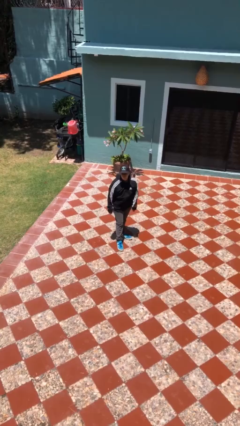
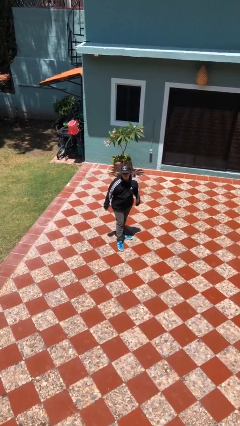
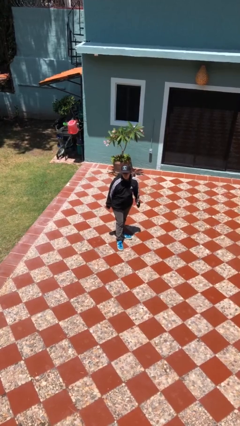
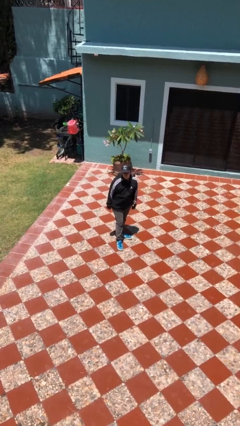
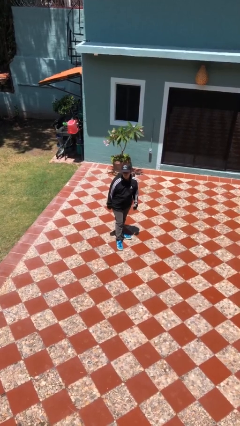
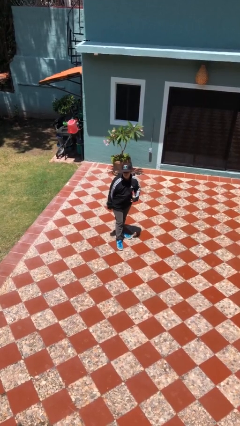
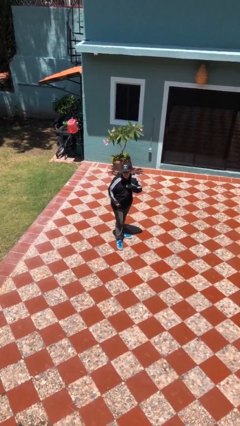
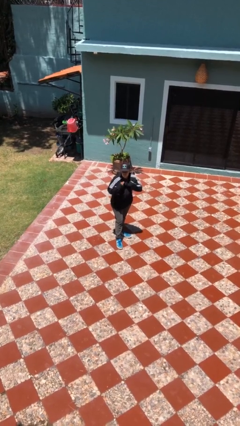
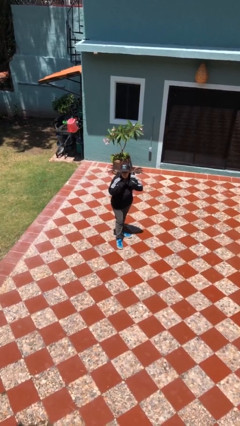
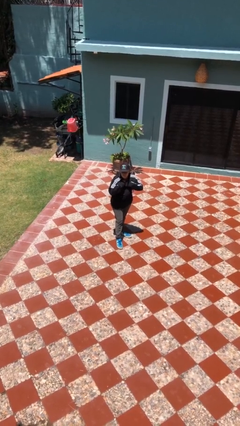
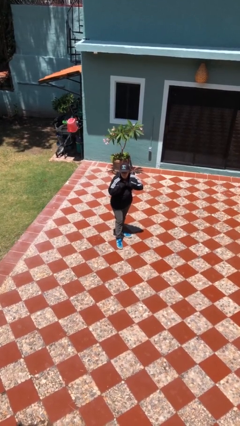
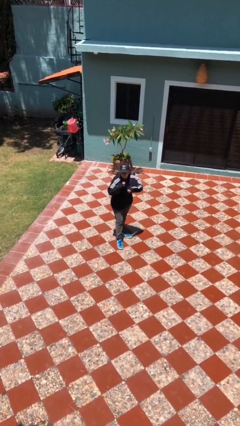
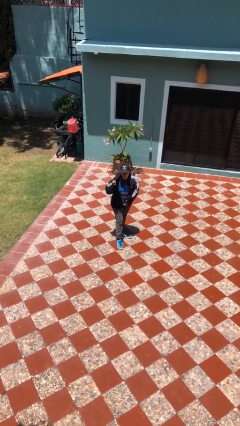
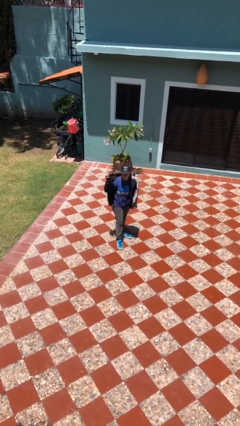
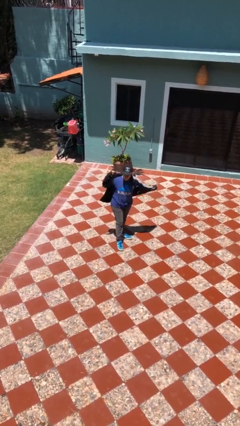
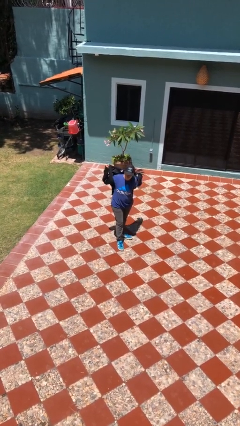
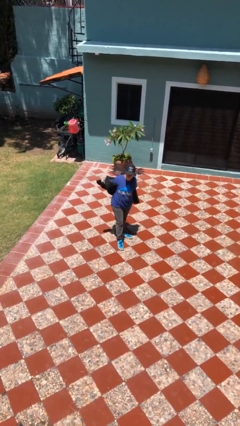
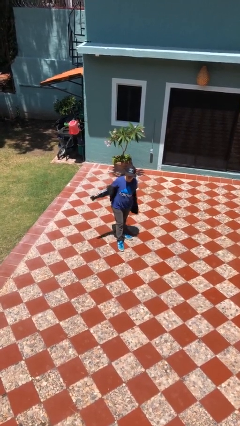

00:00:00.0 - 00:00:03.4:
person unzips jacket

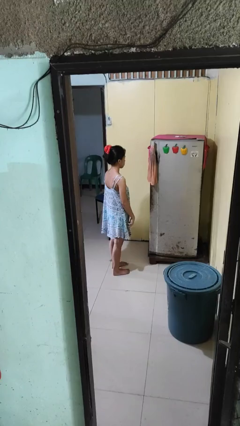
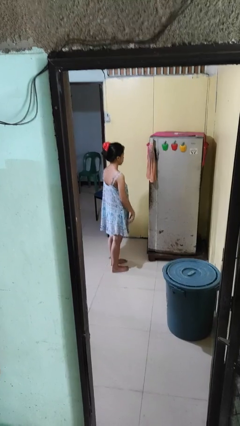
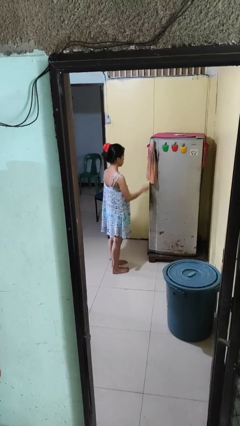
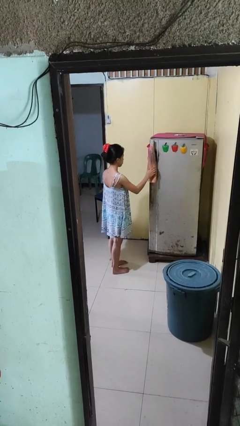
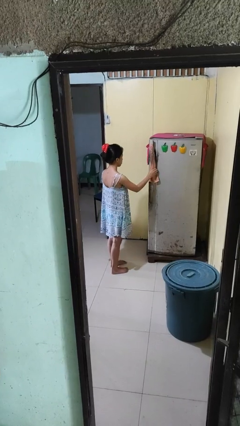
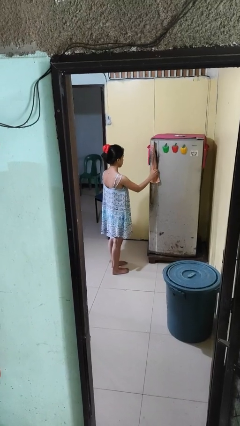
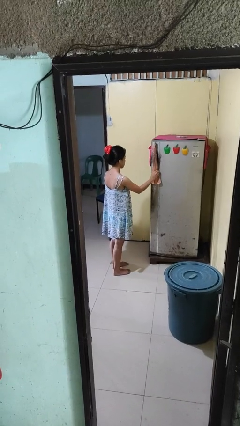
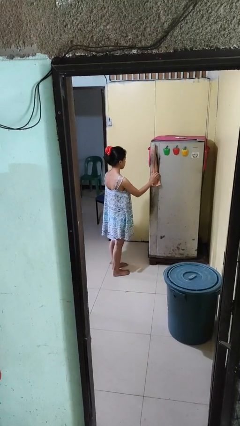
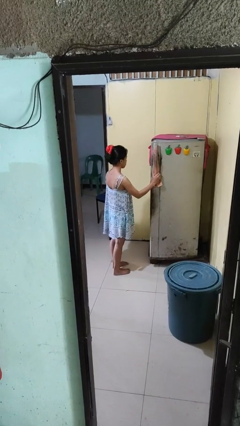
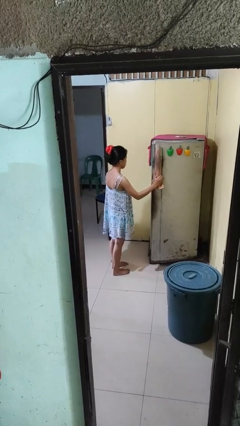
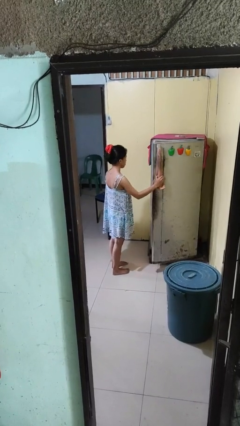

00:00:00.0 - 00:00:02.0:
person opens refrigerator

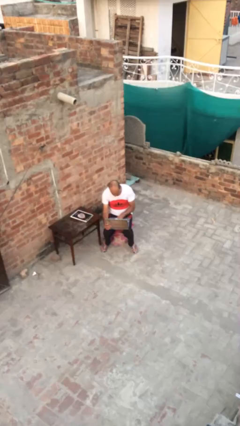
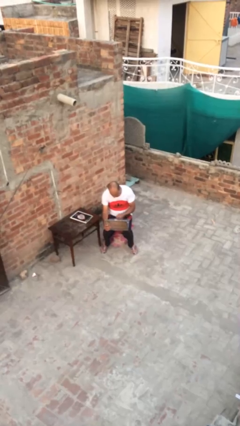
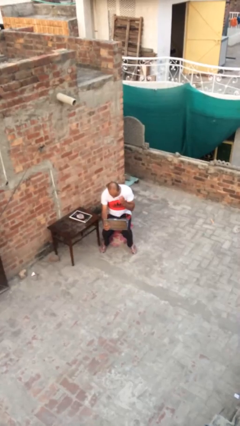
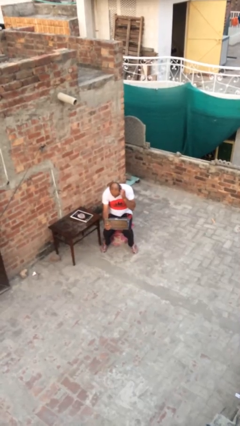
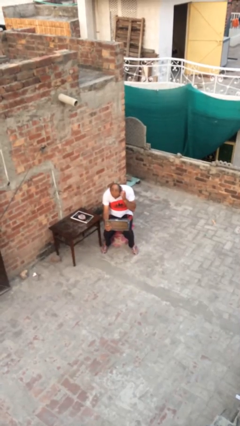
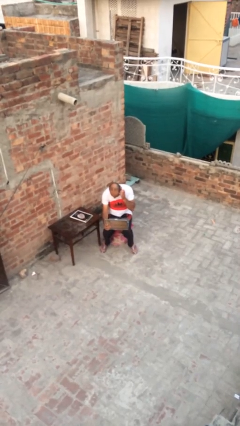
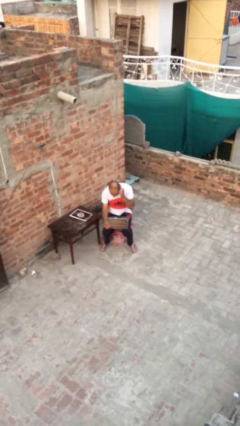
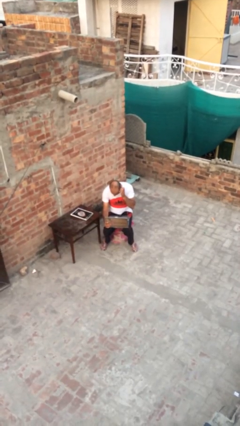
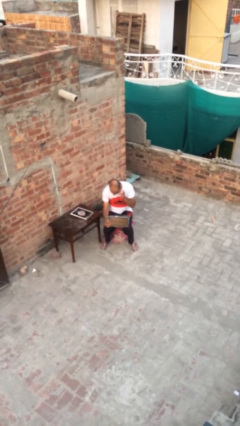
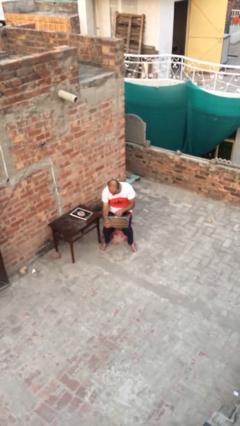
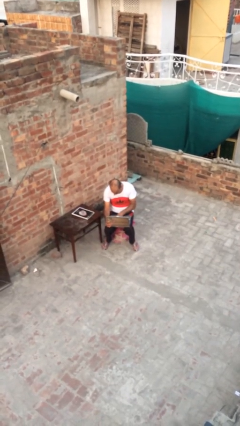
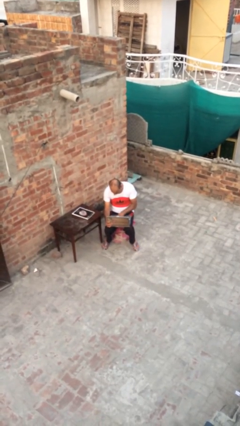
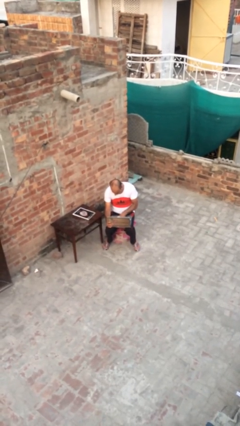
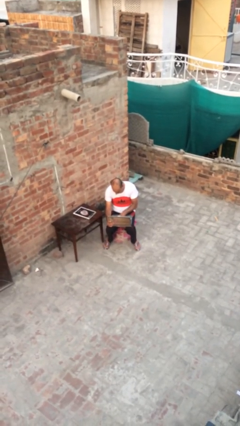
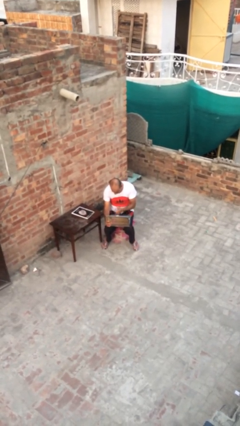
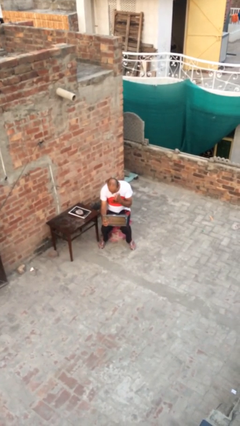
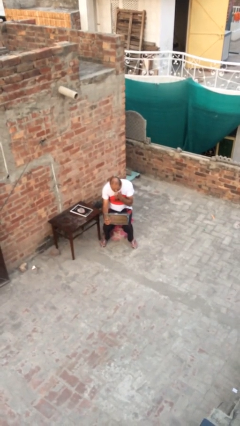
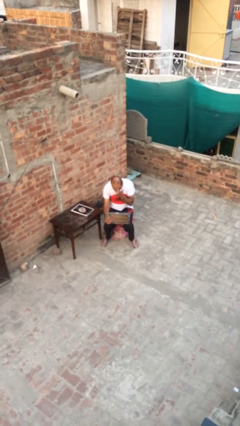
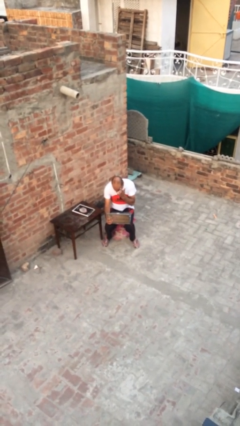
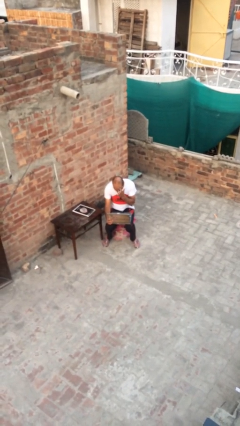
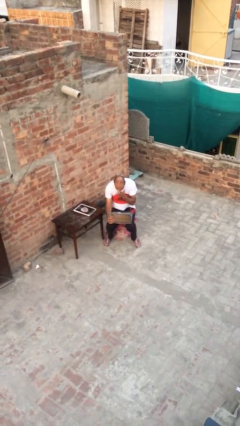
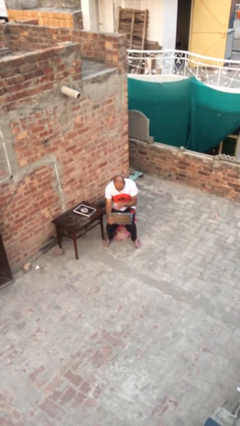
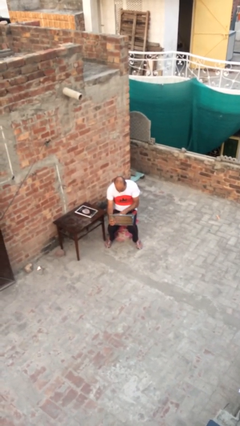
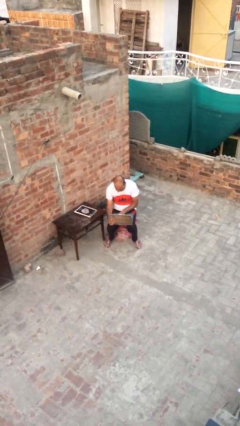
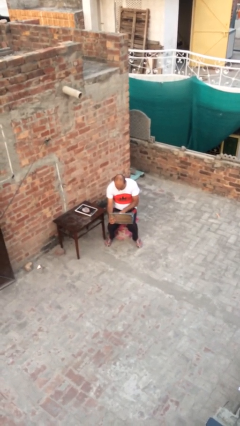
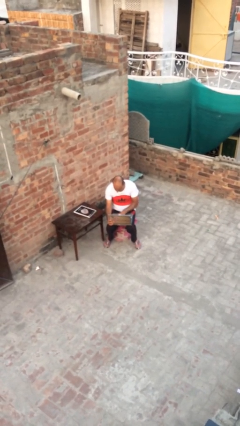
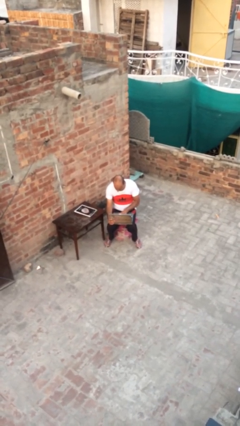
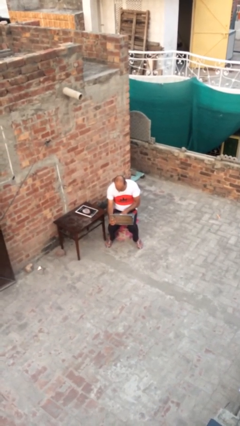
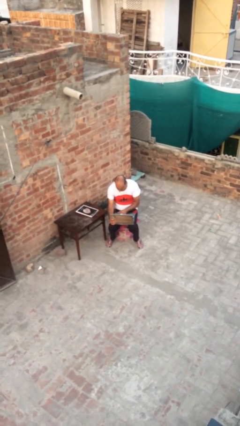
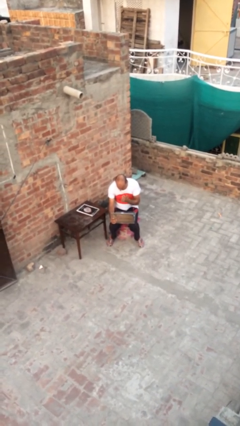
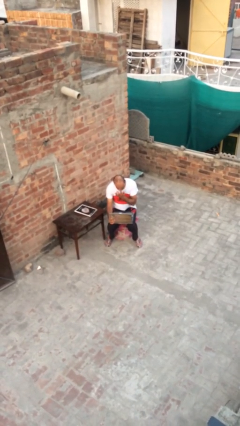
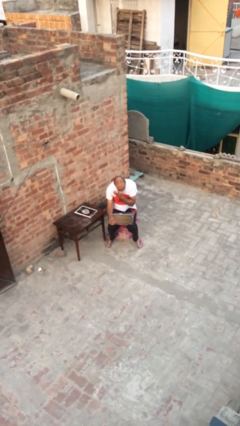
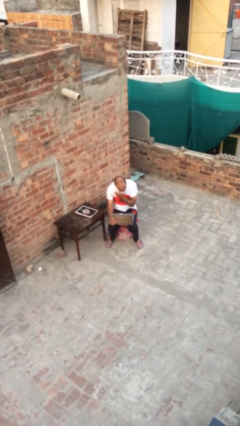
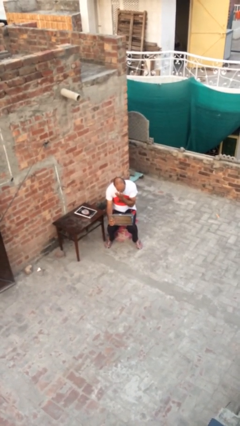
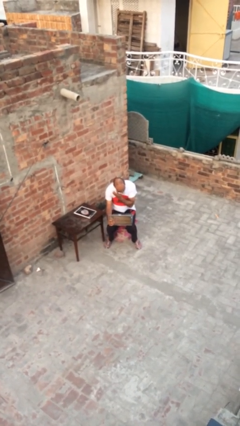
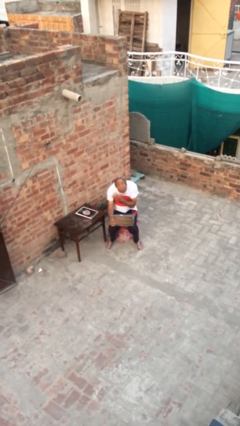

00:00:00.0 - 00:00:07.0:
person interacts with laptop

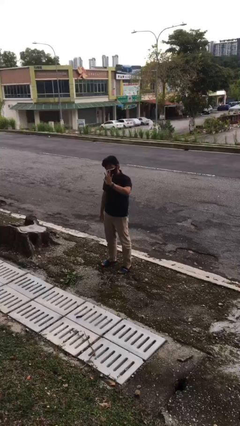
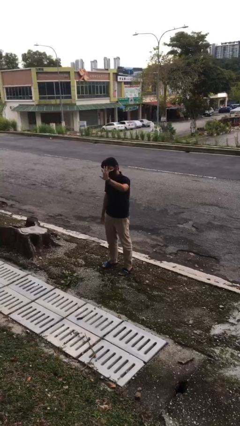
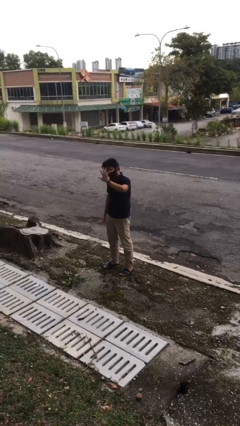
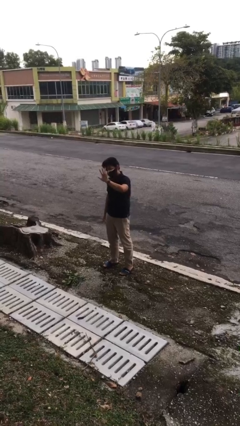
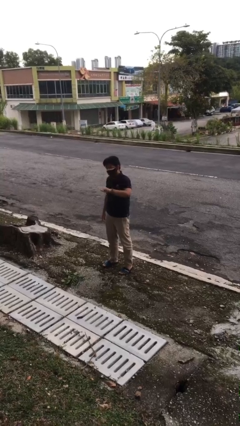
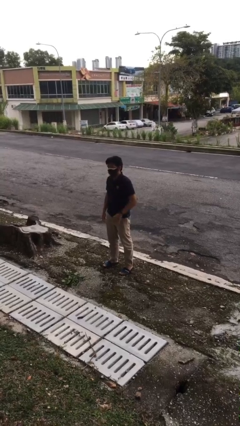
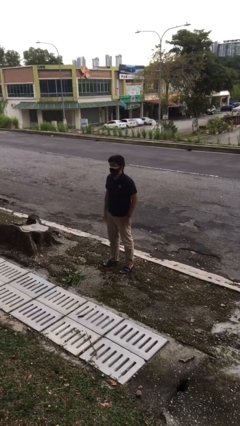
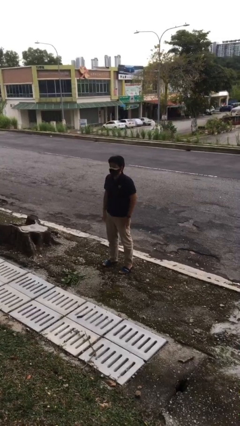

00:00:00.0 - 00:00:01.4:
person gestures number five

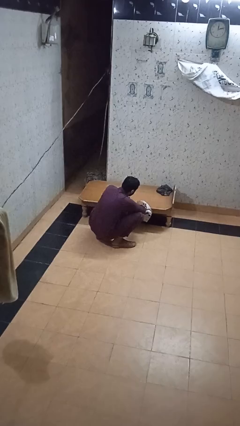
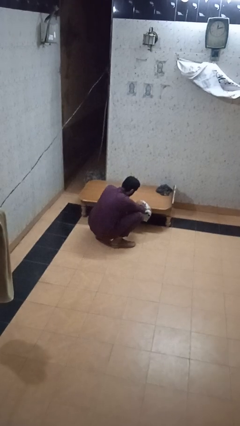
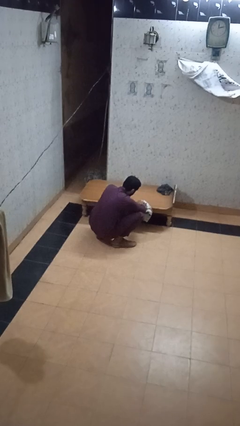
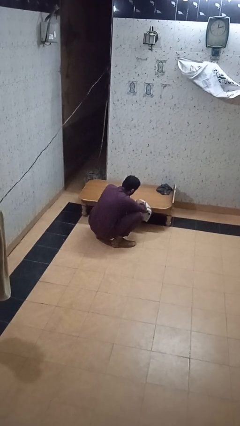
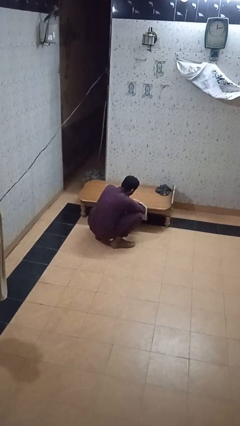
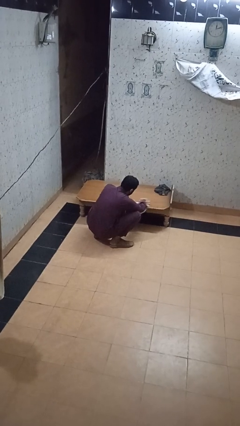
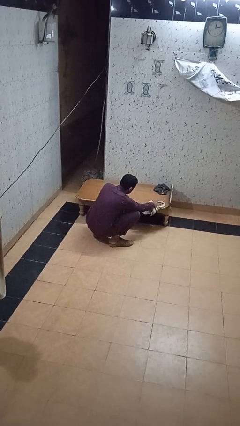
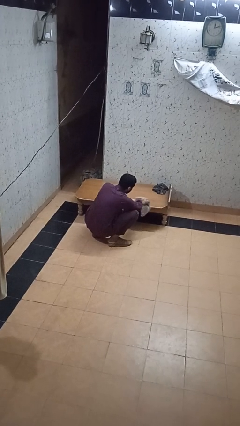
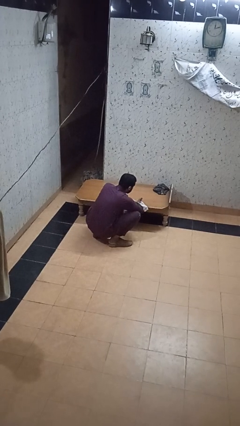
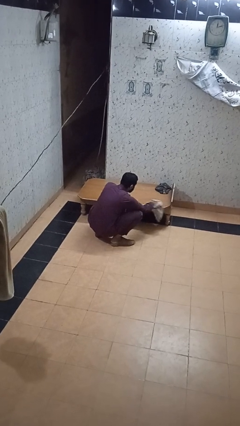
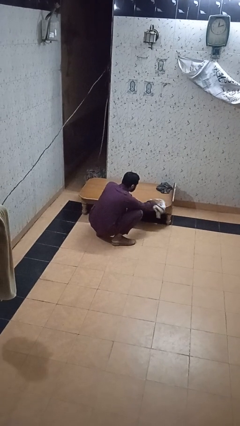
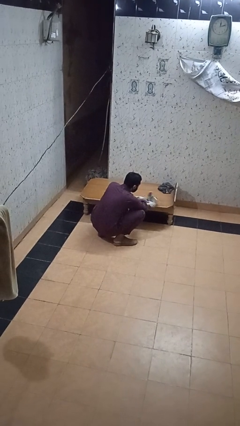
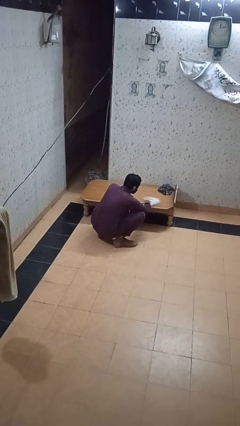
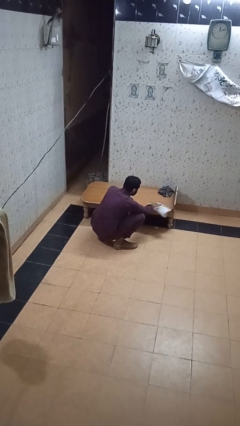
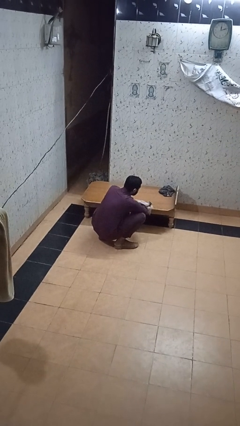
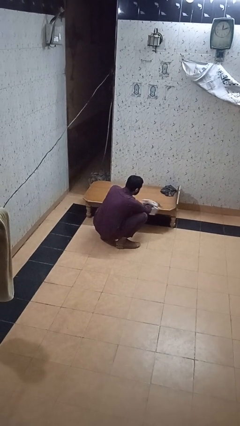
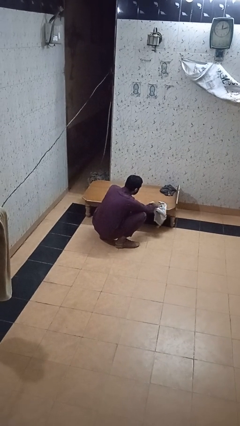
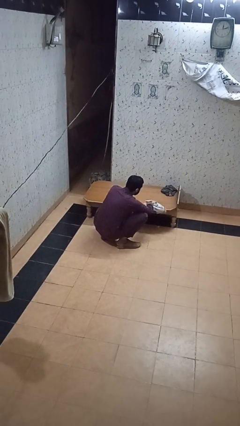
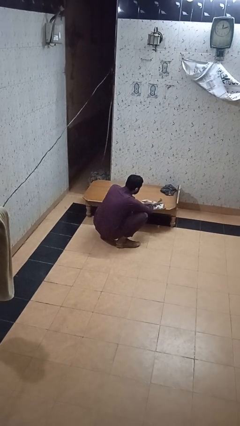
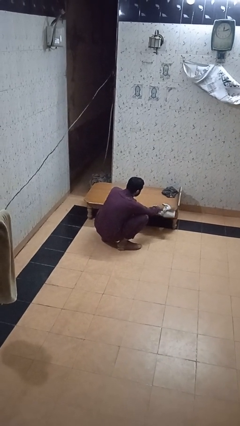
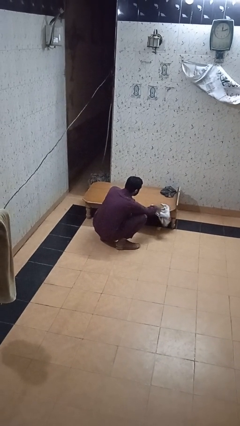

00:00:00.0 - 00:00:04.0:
person vacuums carpet
